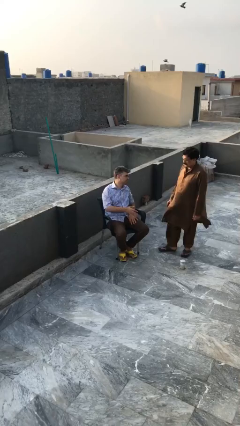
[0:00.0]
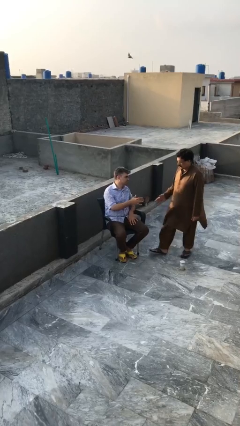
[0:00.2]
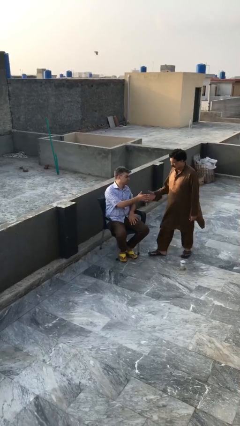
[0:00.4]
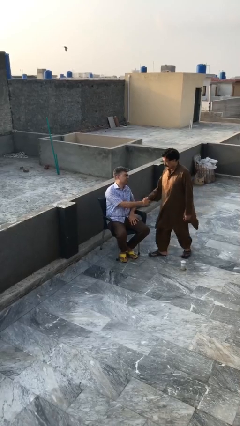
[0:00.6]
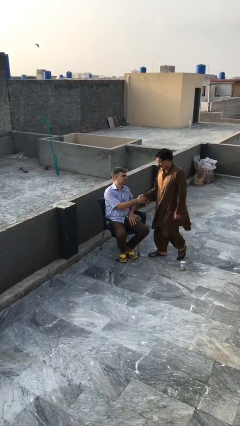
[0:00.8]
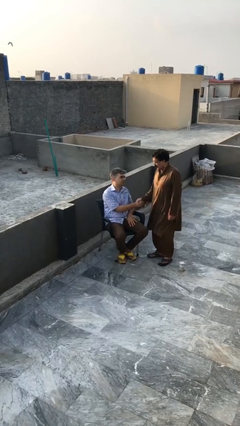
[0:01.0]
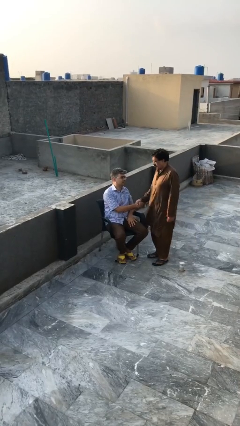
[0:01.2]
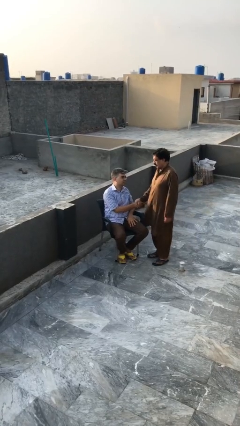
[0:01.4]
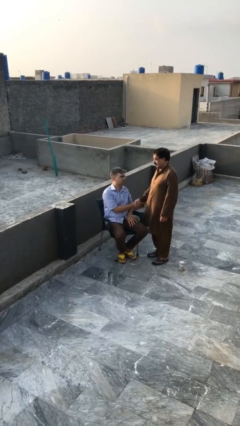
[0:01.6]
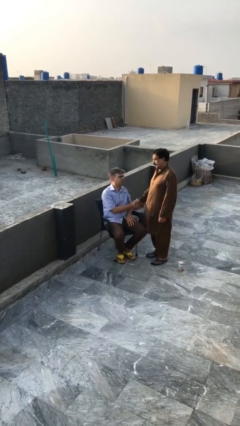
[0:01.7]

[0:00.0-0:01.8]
person shakes hand

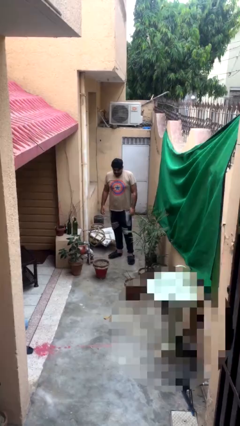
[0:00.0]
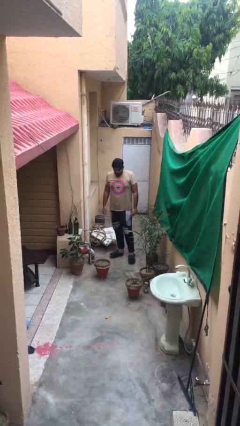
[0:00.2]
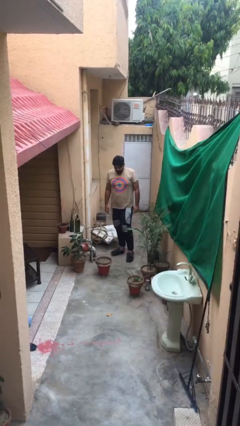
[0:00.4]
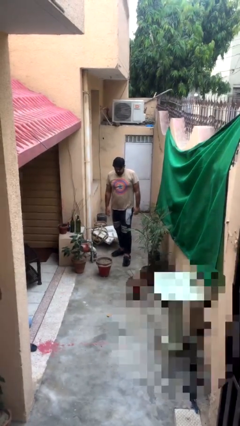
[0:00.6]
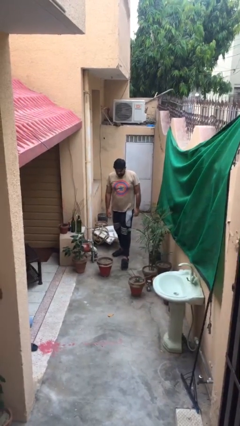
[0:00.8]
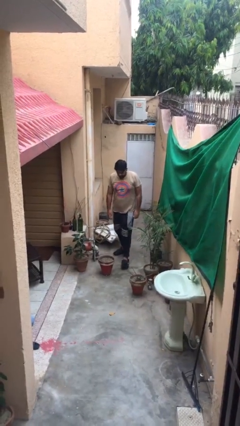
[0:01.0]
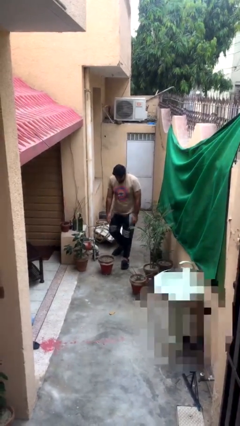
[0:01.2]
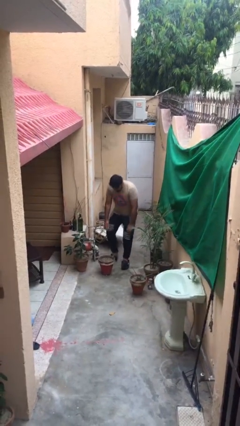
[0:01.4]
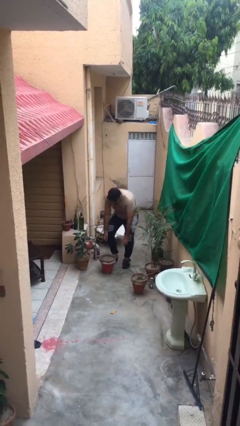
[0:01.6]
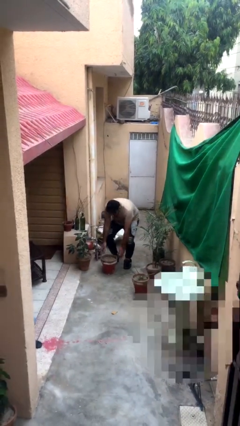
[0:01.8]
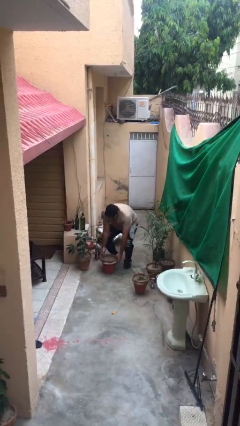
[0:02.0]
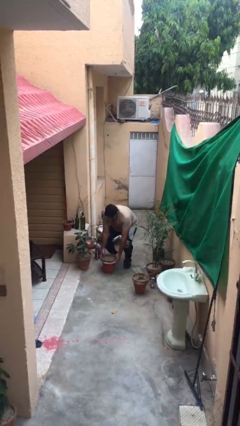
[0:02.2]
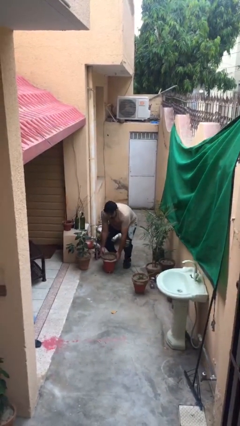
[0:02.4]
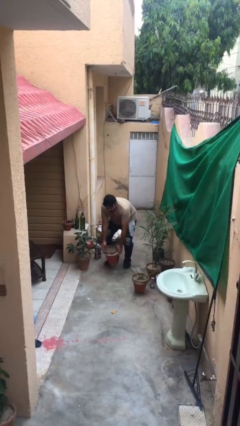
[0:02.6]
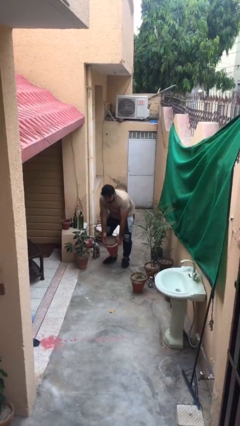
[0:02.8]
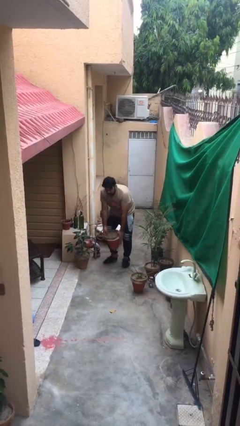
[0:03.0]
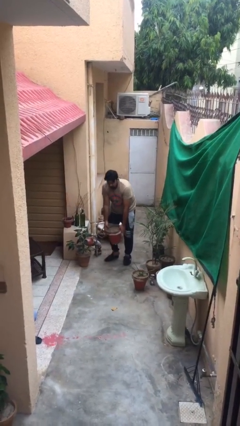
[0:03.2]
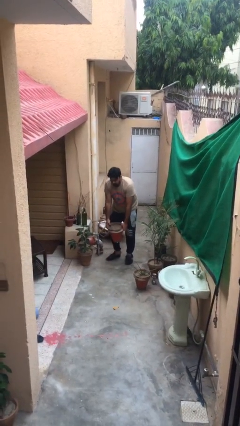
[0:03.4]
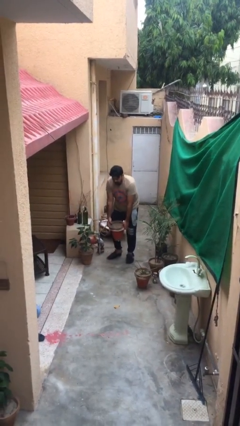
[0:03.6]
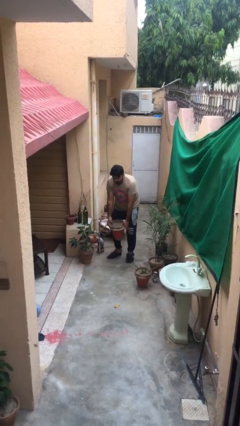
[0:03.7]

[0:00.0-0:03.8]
person picks up object from floor

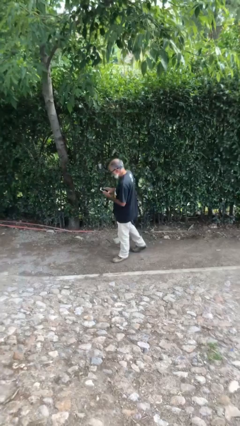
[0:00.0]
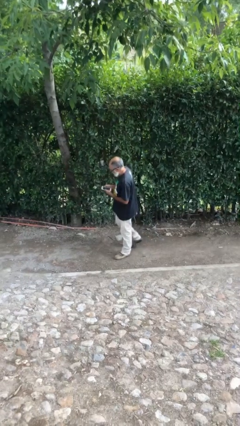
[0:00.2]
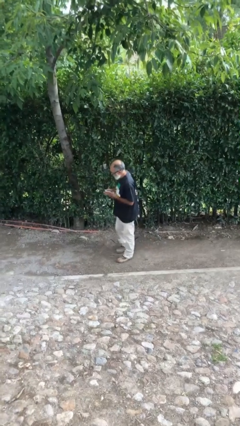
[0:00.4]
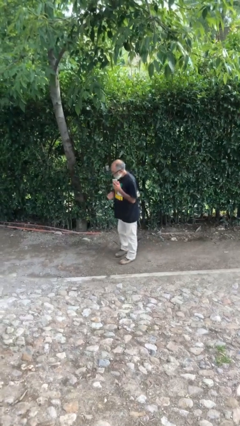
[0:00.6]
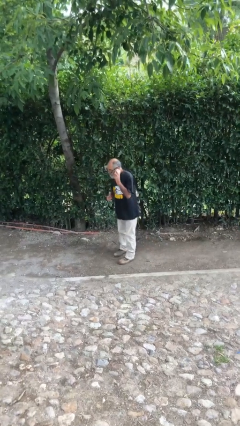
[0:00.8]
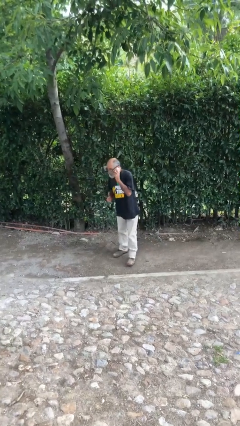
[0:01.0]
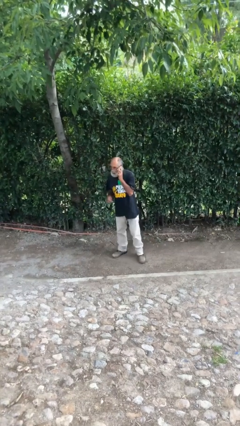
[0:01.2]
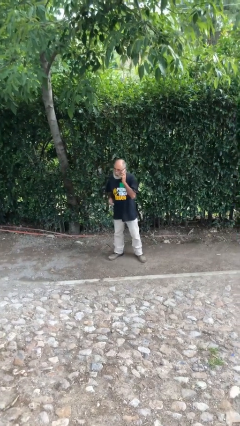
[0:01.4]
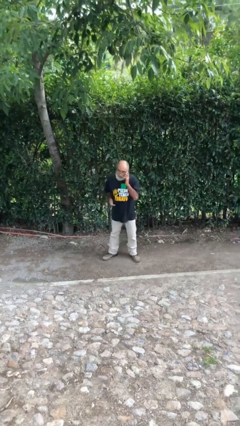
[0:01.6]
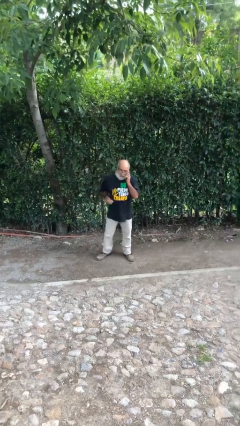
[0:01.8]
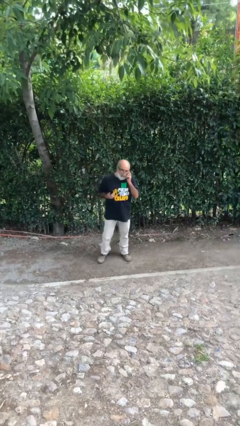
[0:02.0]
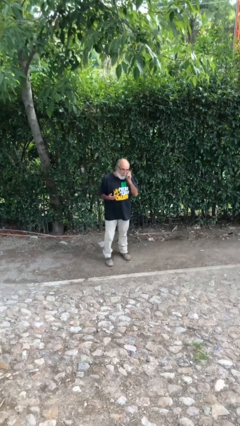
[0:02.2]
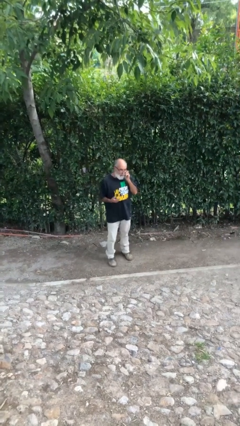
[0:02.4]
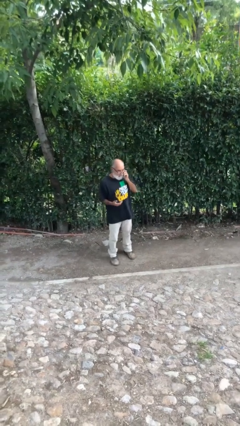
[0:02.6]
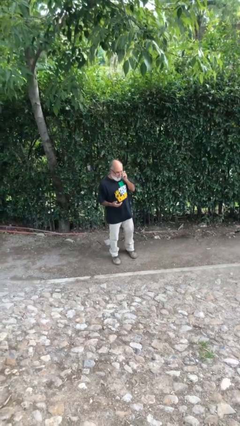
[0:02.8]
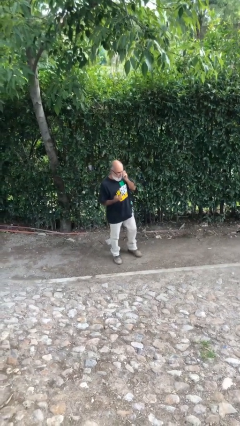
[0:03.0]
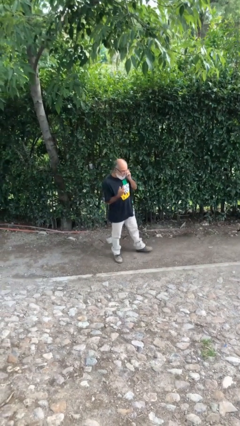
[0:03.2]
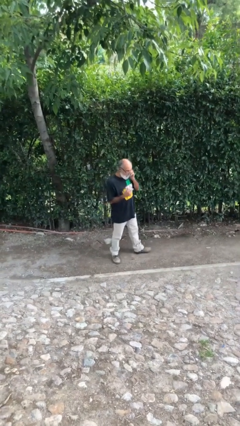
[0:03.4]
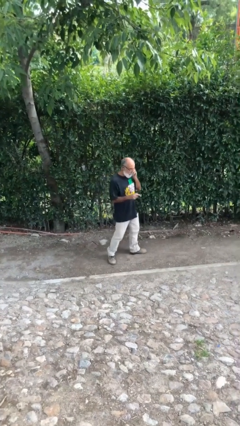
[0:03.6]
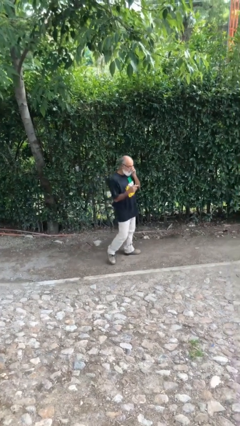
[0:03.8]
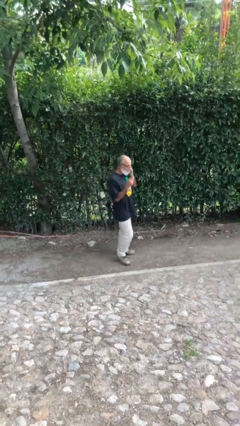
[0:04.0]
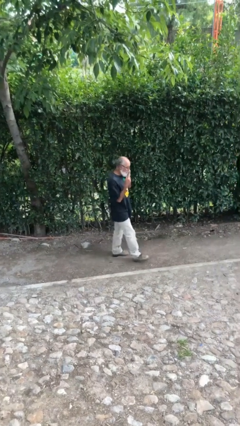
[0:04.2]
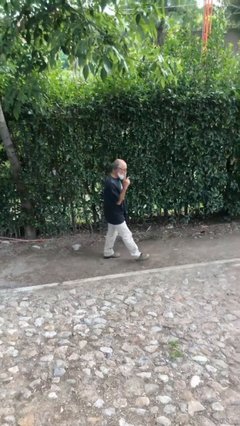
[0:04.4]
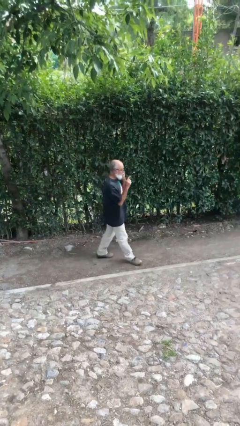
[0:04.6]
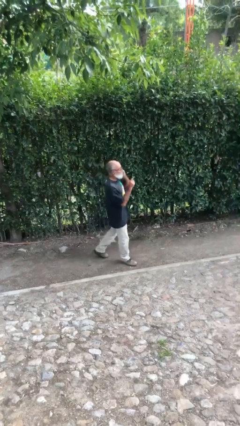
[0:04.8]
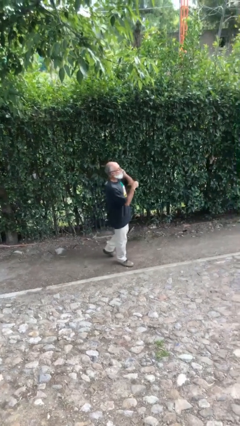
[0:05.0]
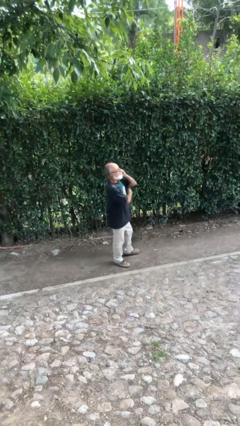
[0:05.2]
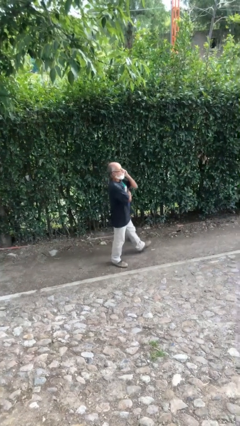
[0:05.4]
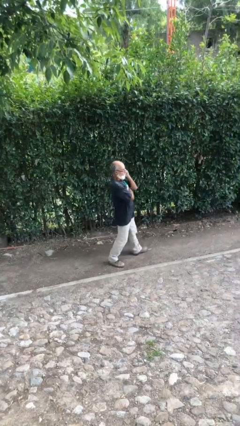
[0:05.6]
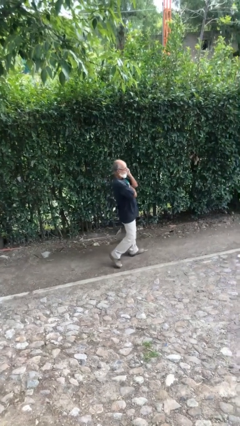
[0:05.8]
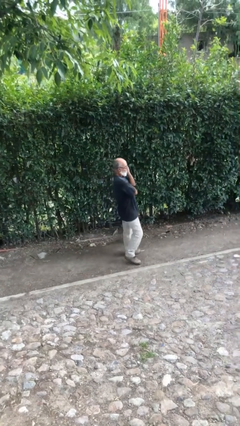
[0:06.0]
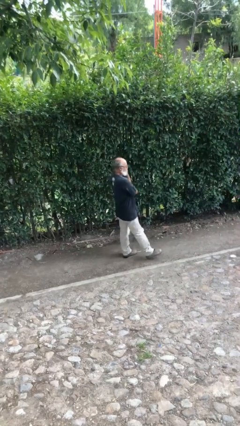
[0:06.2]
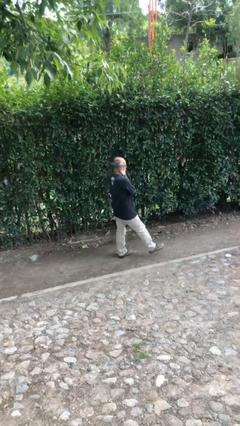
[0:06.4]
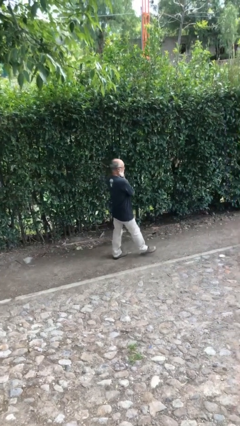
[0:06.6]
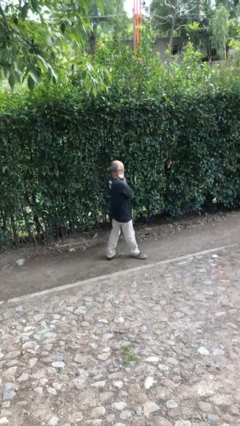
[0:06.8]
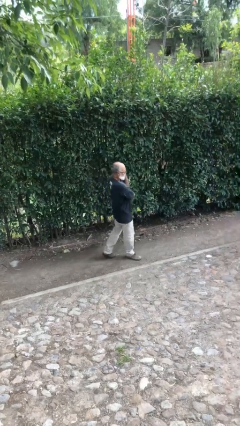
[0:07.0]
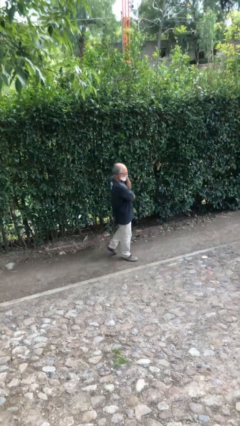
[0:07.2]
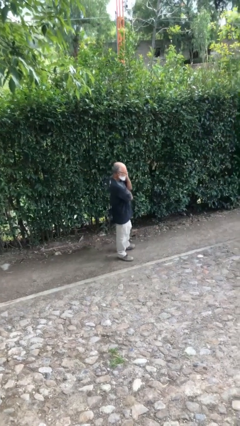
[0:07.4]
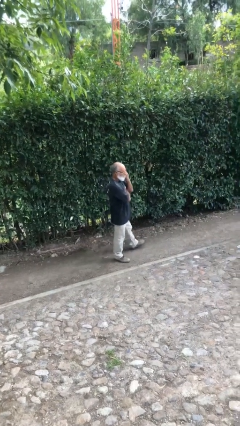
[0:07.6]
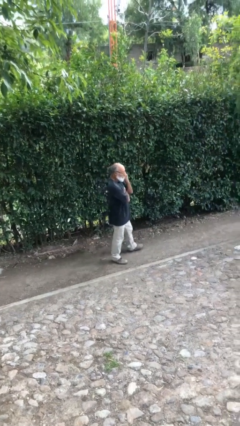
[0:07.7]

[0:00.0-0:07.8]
person talks on phone

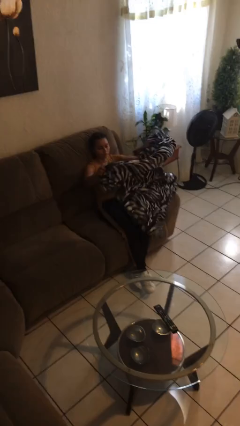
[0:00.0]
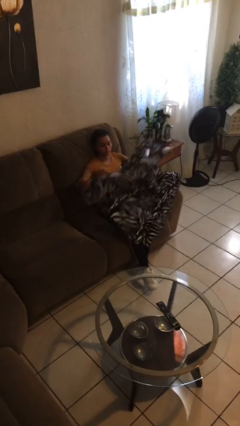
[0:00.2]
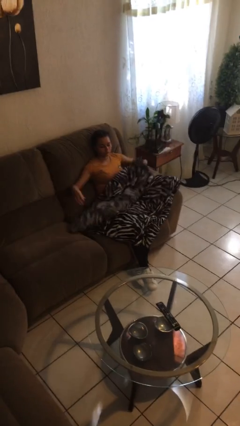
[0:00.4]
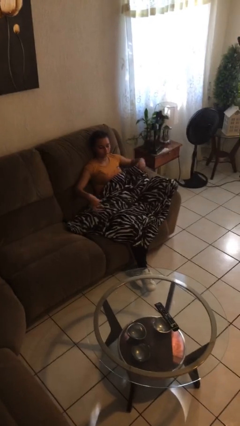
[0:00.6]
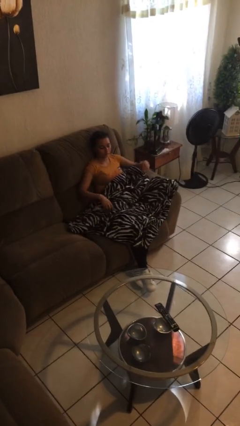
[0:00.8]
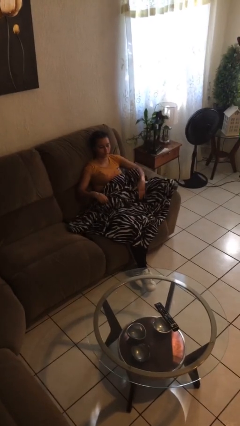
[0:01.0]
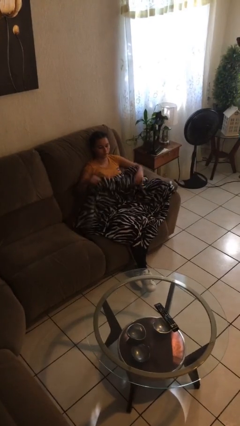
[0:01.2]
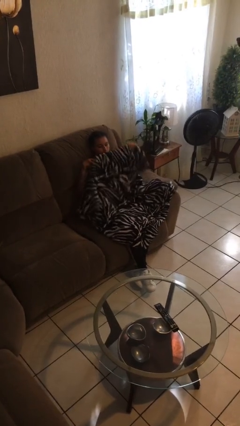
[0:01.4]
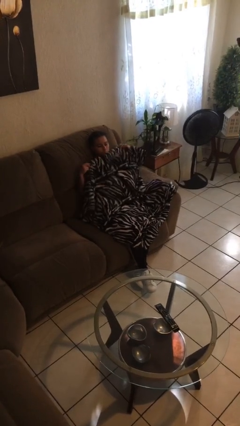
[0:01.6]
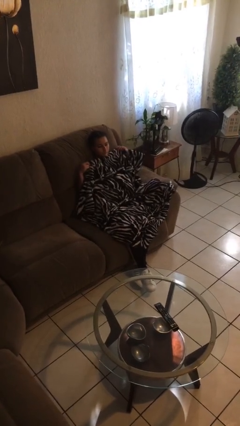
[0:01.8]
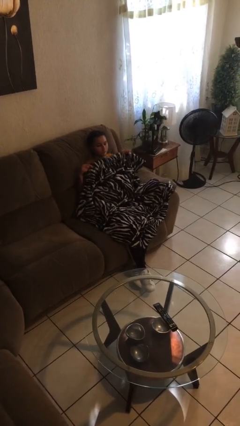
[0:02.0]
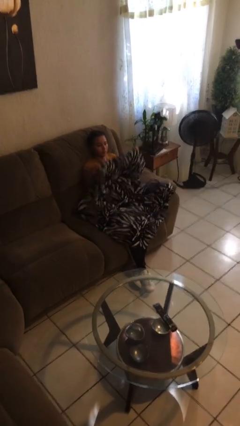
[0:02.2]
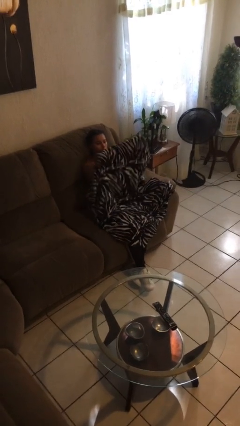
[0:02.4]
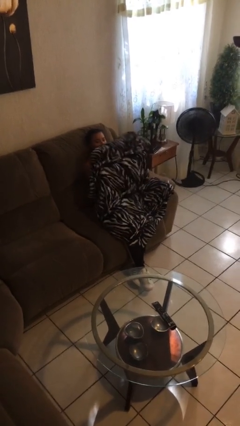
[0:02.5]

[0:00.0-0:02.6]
person covers with blanket

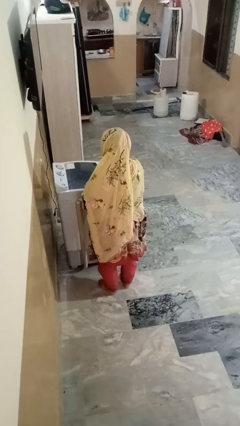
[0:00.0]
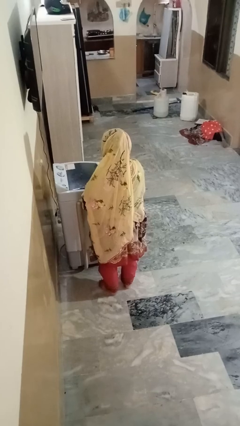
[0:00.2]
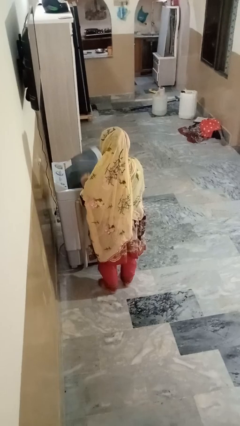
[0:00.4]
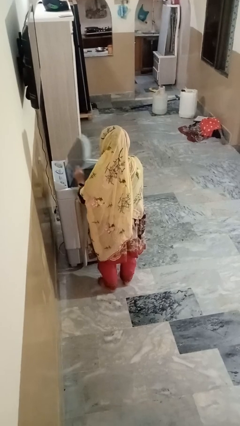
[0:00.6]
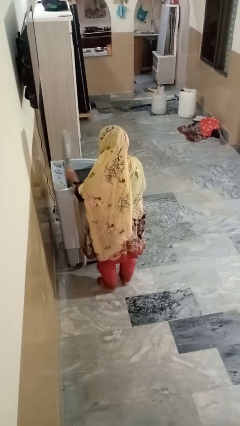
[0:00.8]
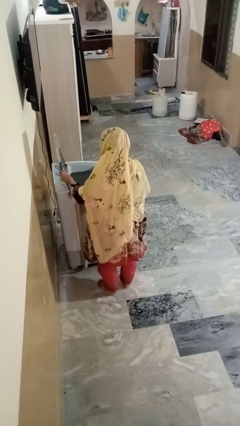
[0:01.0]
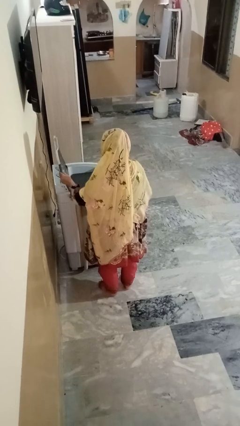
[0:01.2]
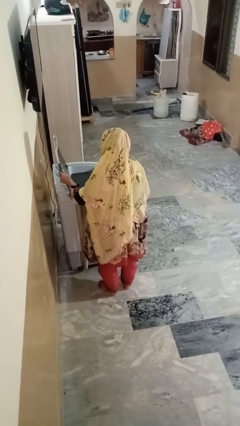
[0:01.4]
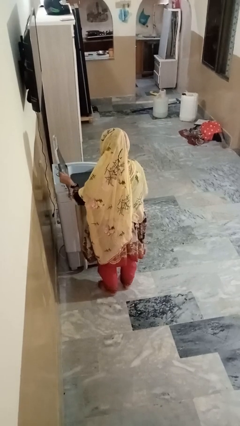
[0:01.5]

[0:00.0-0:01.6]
person opens clothes washer
